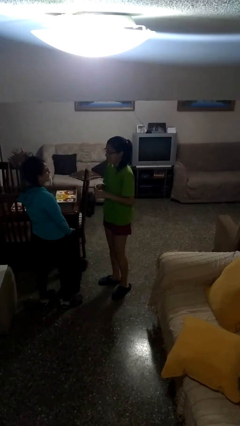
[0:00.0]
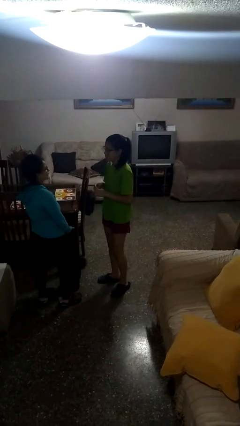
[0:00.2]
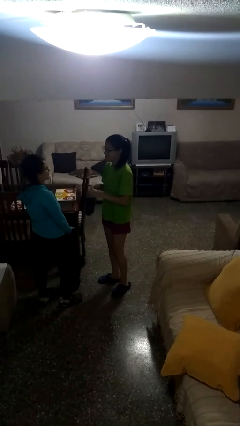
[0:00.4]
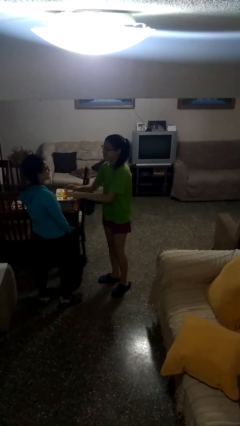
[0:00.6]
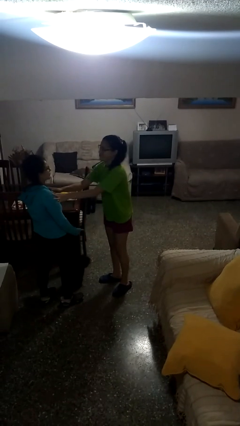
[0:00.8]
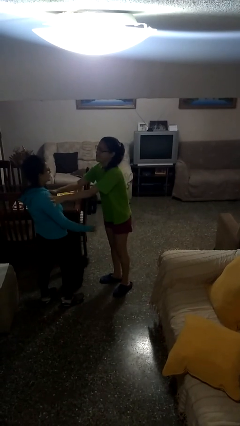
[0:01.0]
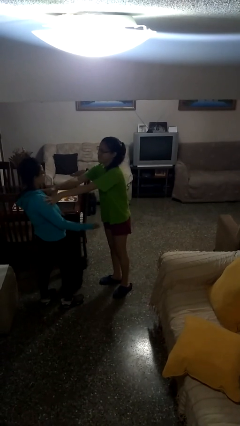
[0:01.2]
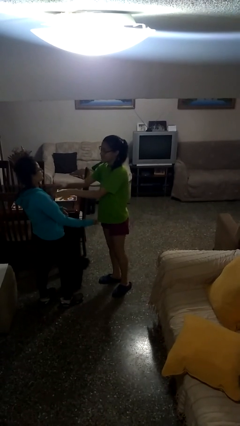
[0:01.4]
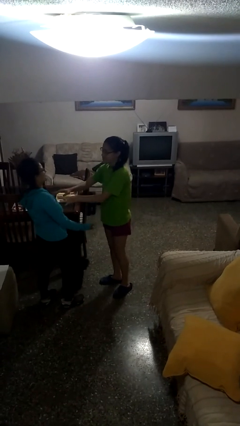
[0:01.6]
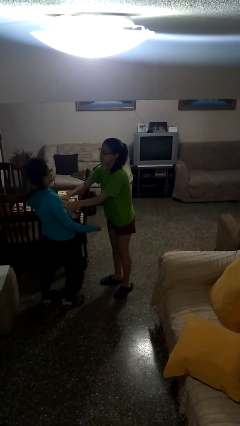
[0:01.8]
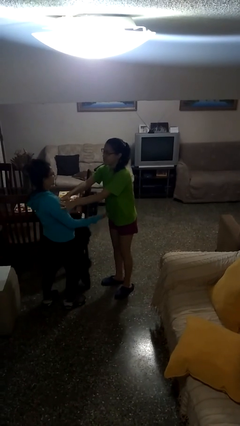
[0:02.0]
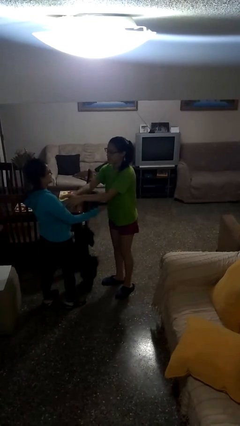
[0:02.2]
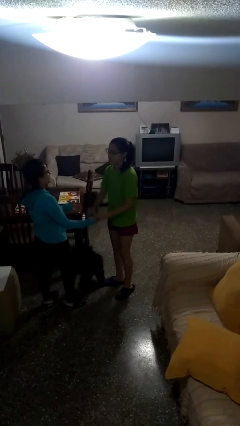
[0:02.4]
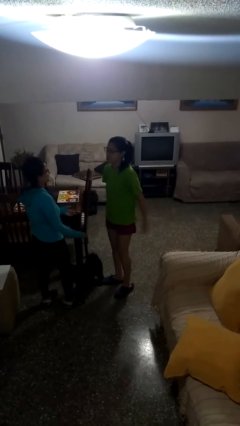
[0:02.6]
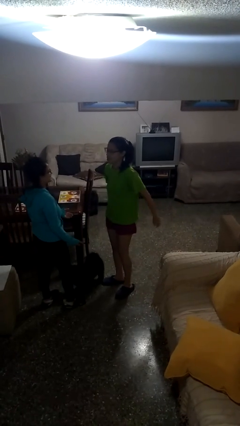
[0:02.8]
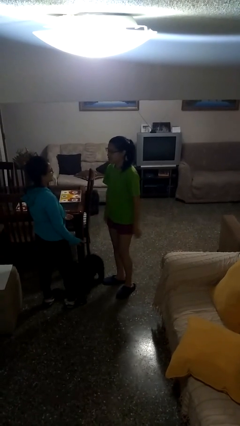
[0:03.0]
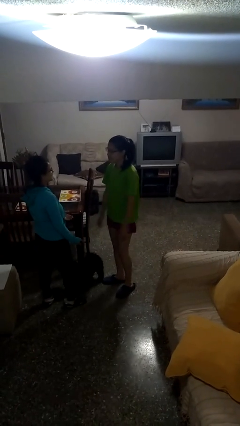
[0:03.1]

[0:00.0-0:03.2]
person shoves person

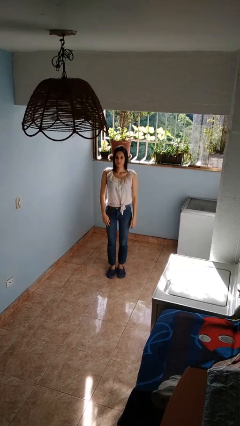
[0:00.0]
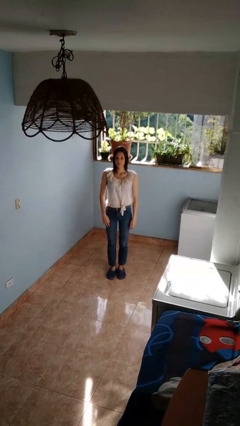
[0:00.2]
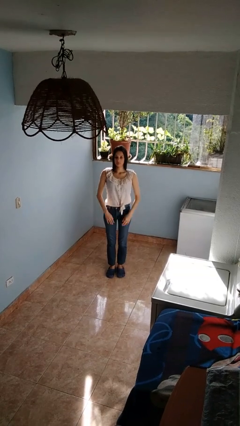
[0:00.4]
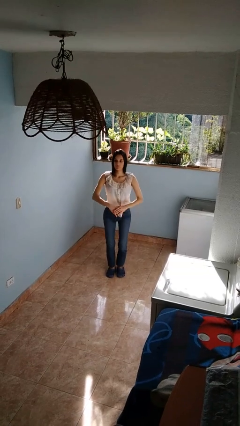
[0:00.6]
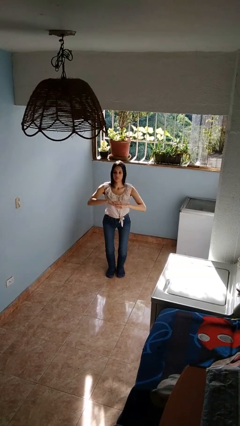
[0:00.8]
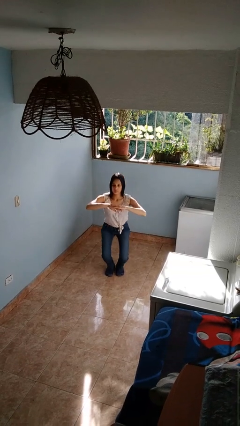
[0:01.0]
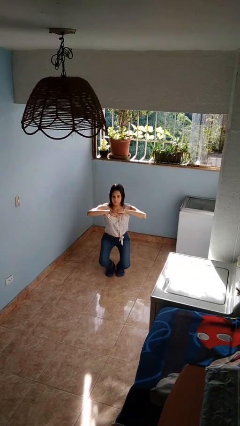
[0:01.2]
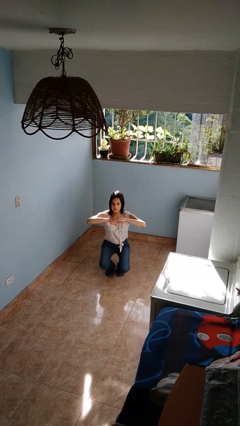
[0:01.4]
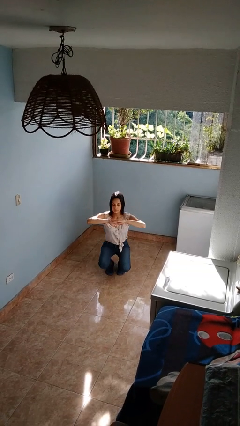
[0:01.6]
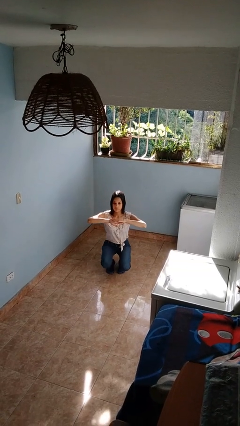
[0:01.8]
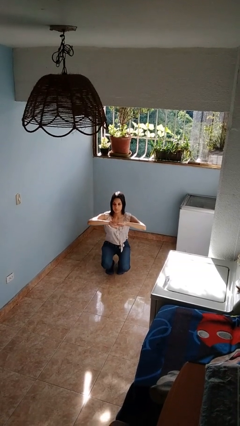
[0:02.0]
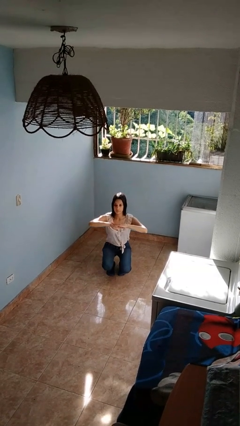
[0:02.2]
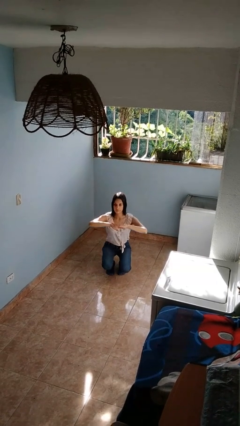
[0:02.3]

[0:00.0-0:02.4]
person squats

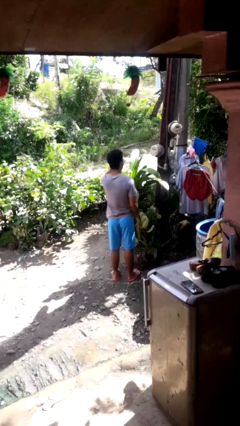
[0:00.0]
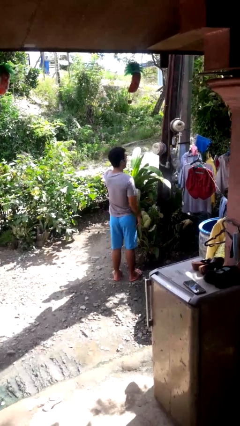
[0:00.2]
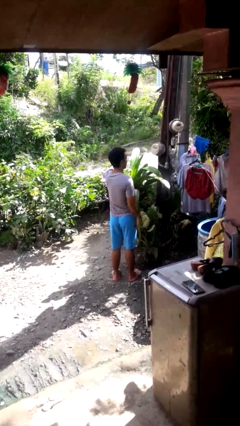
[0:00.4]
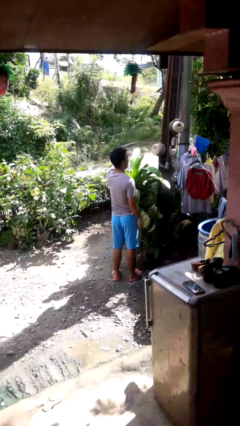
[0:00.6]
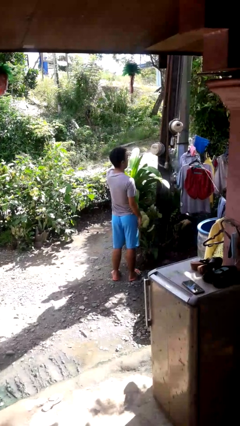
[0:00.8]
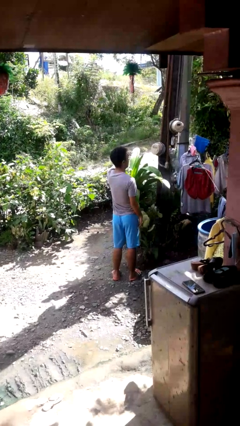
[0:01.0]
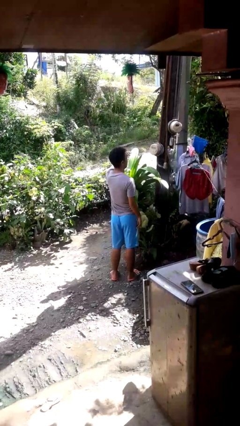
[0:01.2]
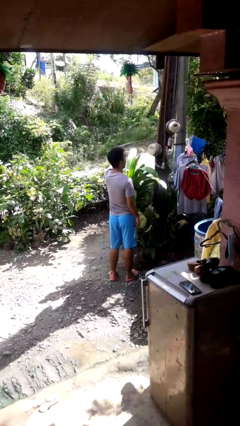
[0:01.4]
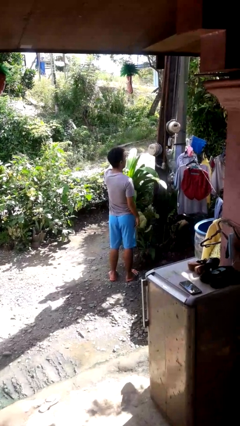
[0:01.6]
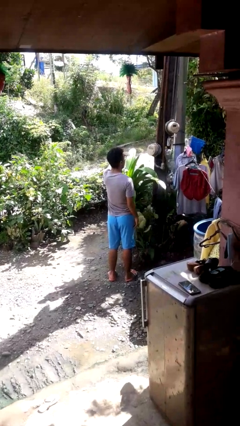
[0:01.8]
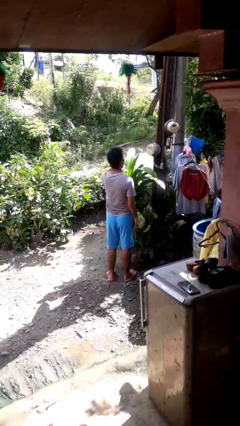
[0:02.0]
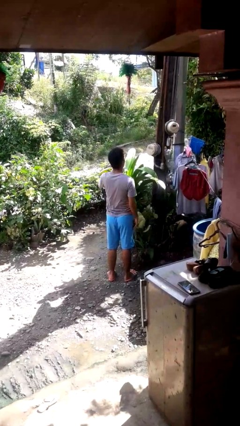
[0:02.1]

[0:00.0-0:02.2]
person shades eyes

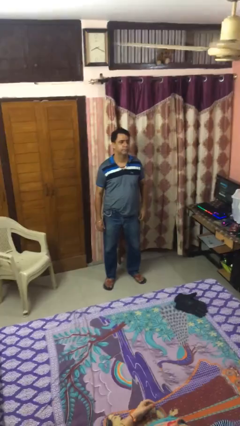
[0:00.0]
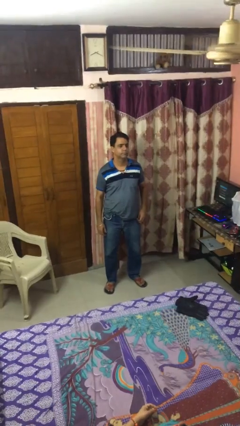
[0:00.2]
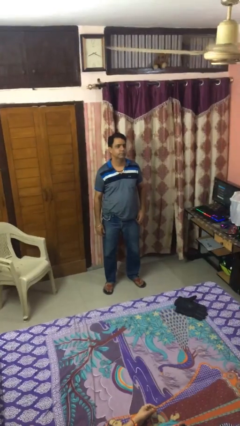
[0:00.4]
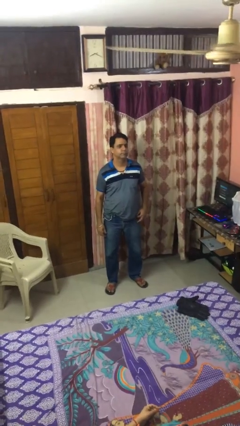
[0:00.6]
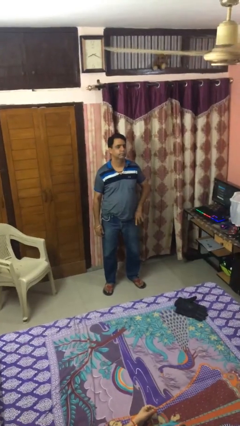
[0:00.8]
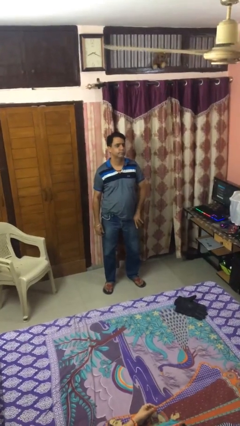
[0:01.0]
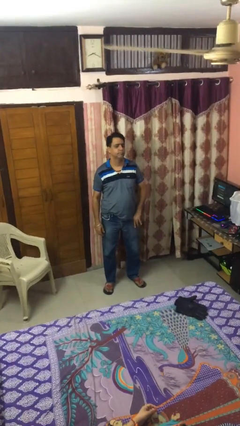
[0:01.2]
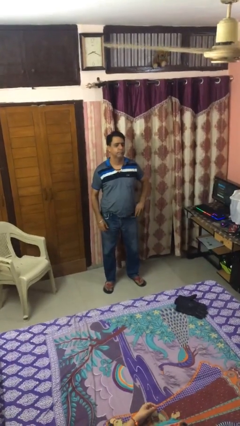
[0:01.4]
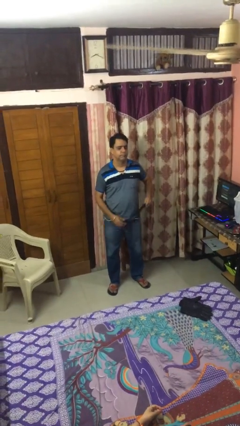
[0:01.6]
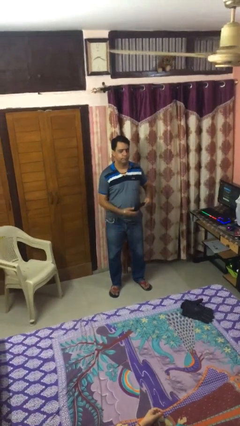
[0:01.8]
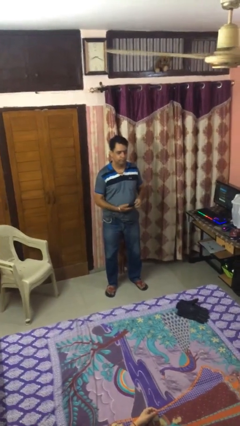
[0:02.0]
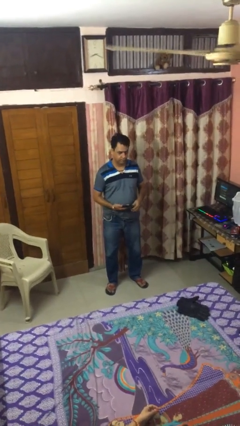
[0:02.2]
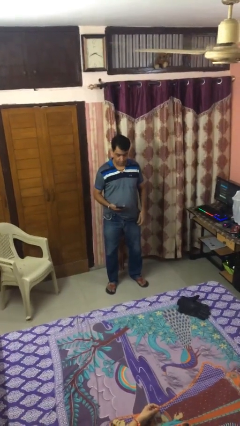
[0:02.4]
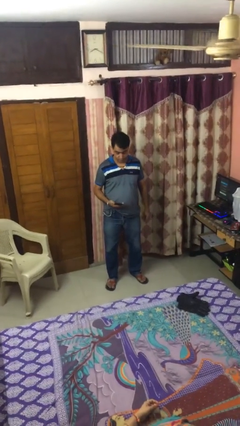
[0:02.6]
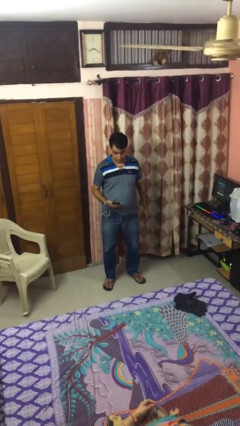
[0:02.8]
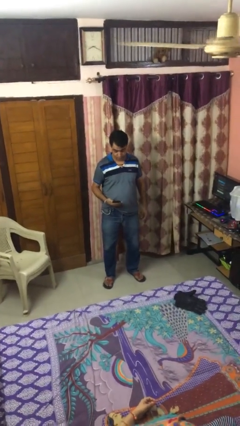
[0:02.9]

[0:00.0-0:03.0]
person takes phone from pocket

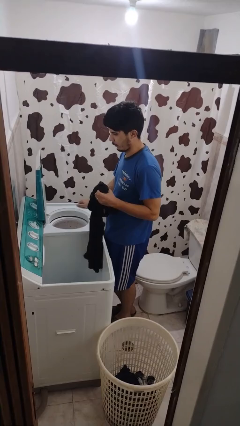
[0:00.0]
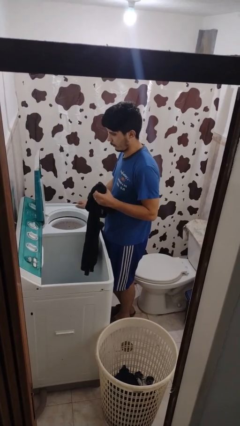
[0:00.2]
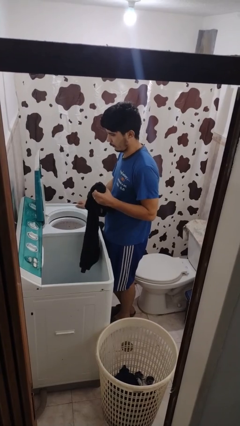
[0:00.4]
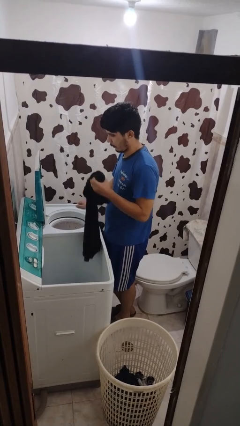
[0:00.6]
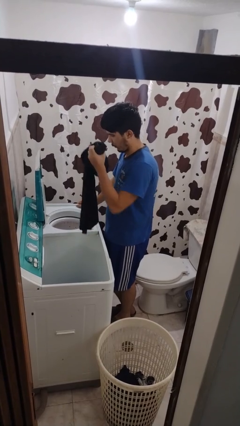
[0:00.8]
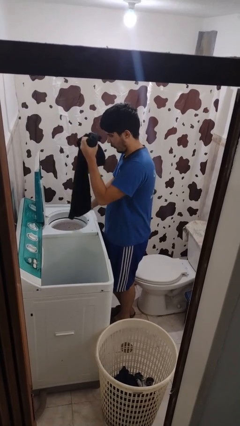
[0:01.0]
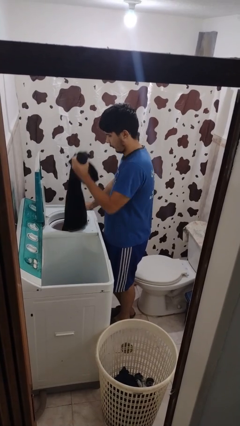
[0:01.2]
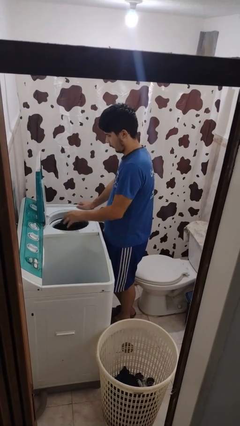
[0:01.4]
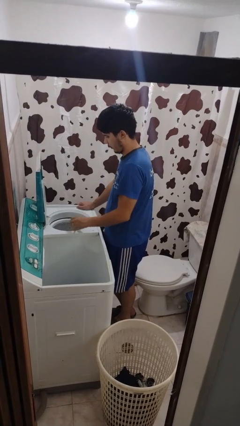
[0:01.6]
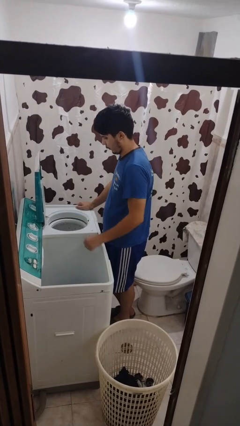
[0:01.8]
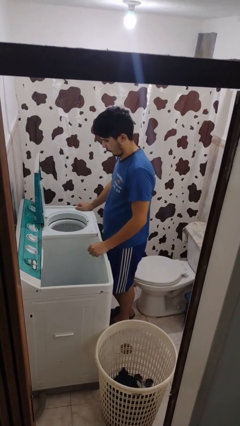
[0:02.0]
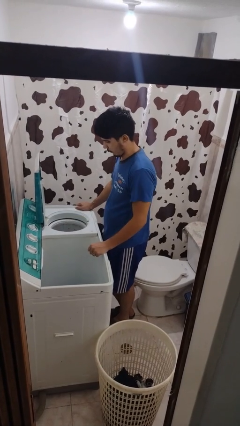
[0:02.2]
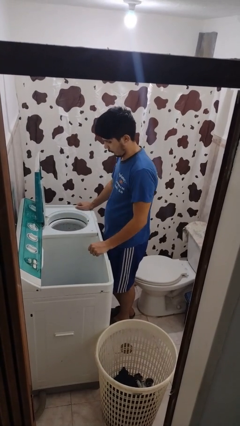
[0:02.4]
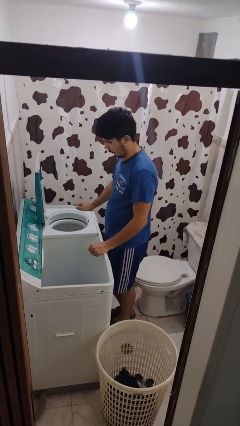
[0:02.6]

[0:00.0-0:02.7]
person loads dryer

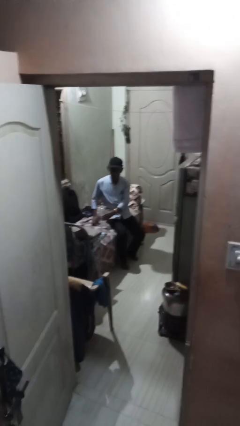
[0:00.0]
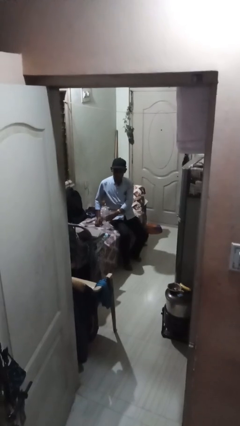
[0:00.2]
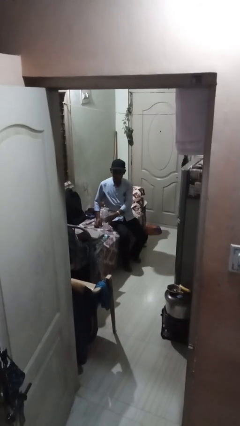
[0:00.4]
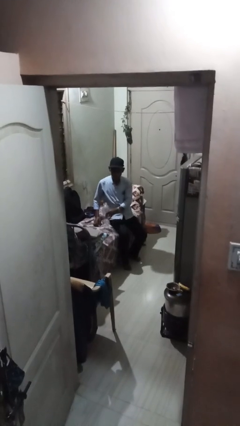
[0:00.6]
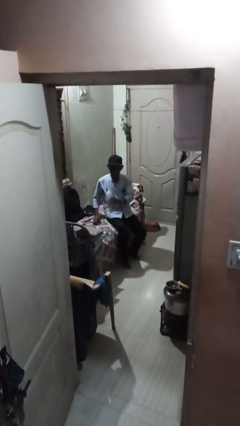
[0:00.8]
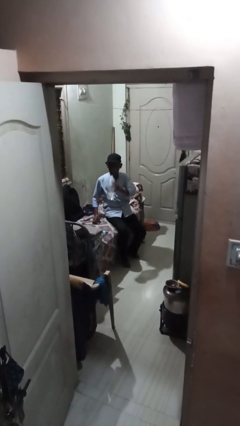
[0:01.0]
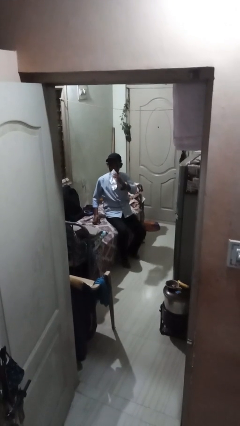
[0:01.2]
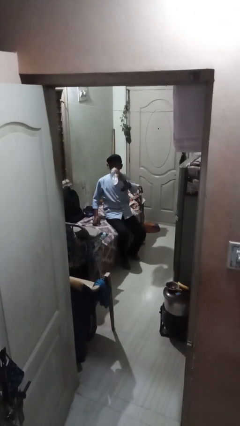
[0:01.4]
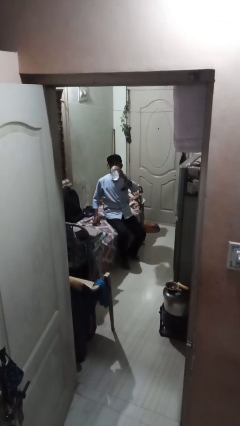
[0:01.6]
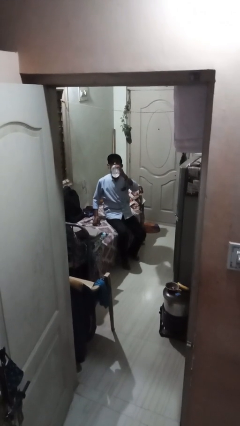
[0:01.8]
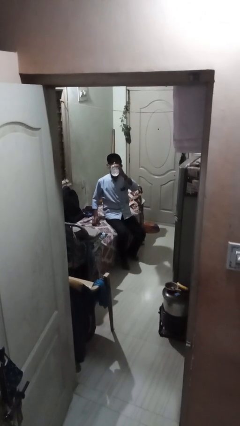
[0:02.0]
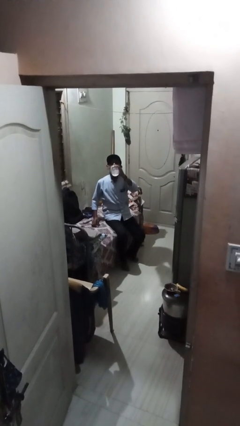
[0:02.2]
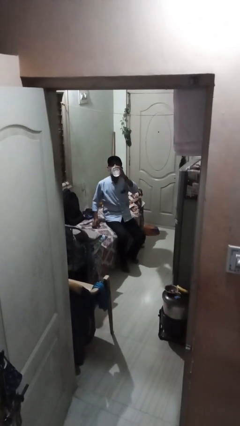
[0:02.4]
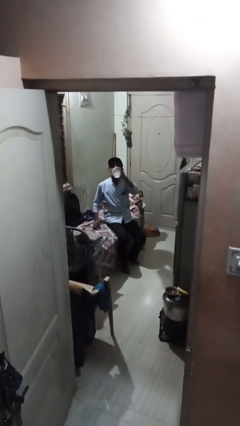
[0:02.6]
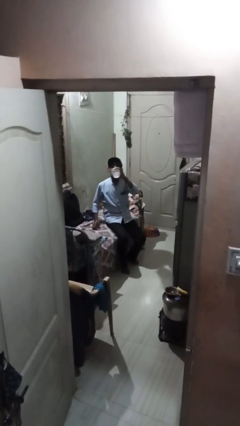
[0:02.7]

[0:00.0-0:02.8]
person drinks from bottle

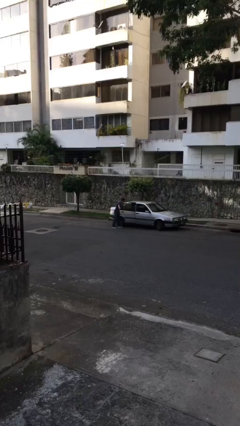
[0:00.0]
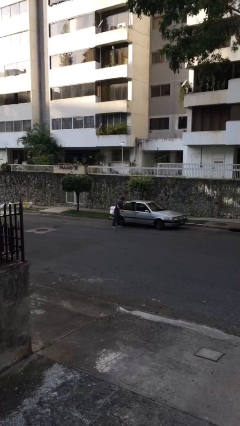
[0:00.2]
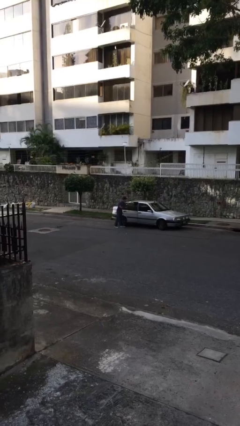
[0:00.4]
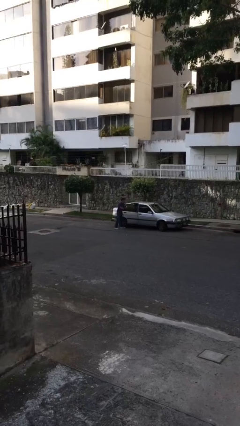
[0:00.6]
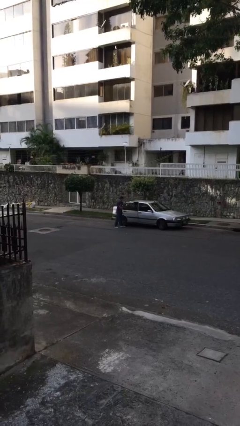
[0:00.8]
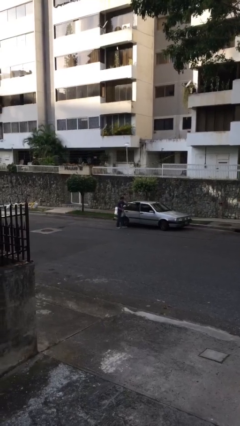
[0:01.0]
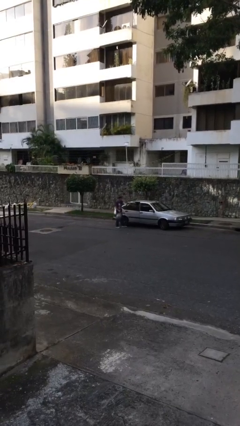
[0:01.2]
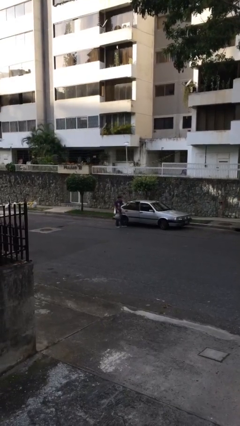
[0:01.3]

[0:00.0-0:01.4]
person unloads car
